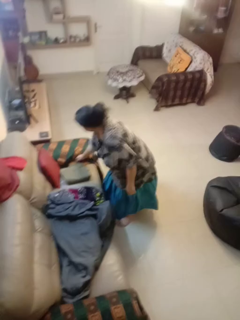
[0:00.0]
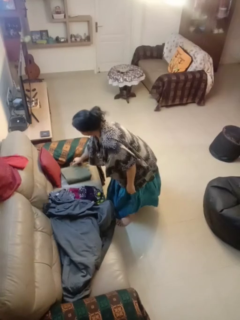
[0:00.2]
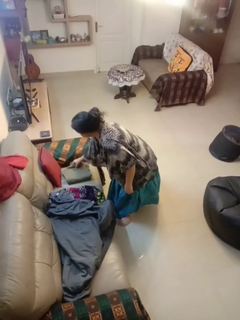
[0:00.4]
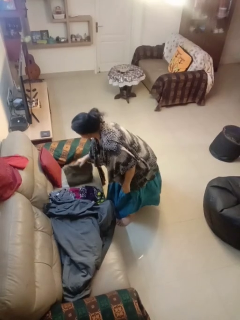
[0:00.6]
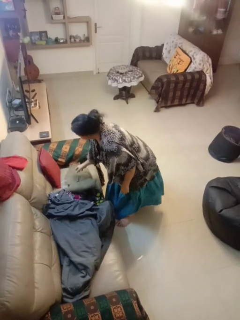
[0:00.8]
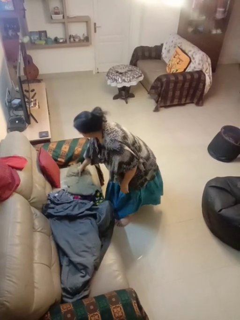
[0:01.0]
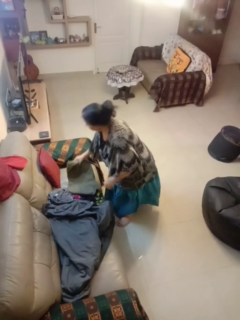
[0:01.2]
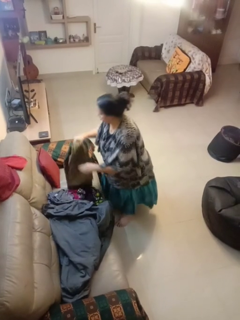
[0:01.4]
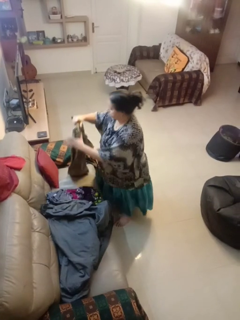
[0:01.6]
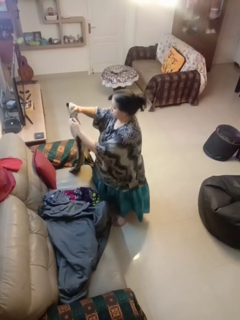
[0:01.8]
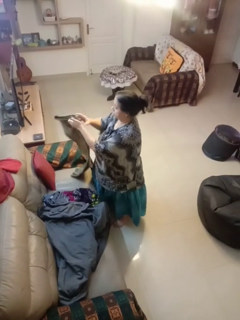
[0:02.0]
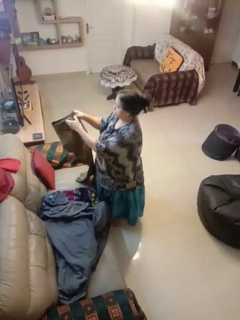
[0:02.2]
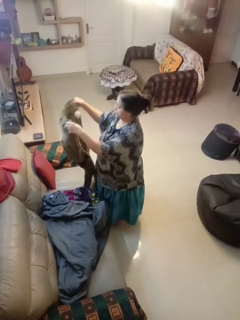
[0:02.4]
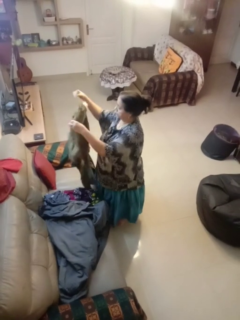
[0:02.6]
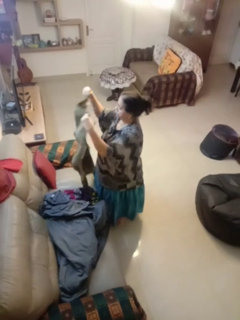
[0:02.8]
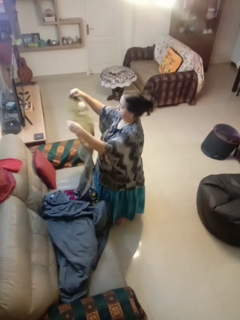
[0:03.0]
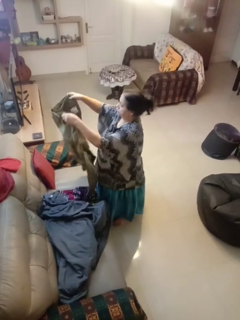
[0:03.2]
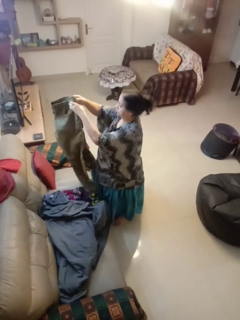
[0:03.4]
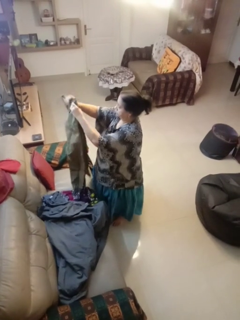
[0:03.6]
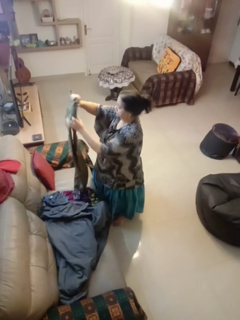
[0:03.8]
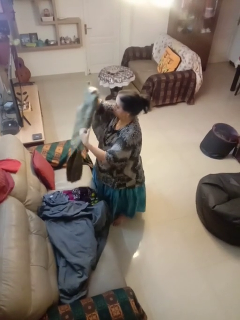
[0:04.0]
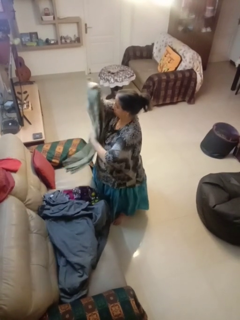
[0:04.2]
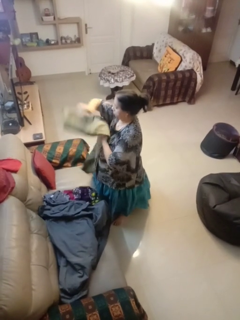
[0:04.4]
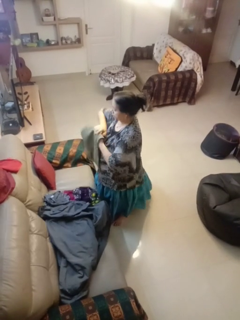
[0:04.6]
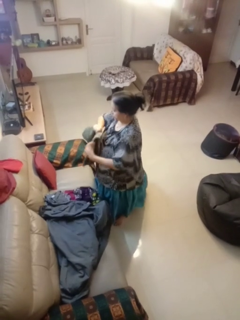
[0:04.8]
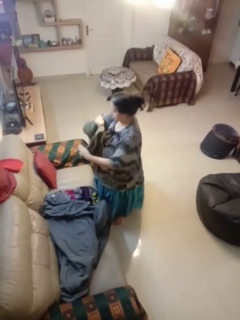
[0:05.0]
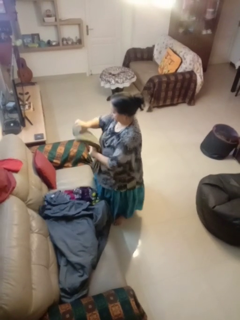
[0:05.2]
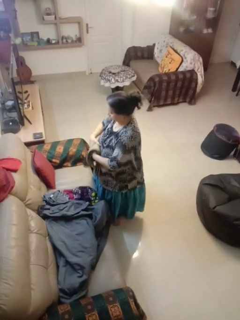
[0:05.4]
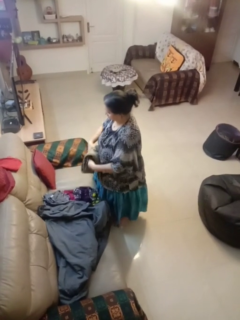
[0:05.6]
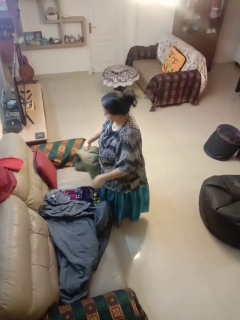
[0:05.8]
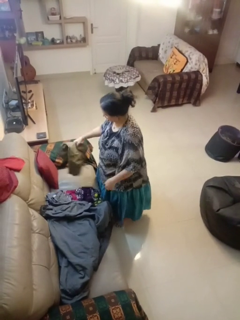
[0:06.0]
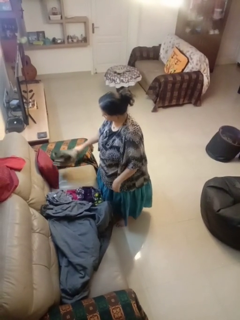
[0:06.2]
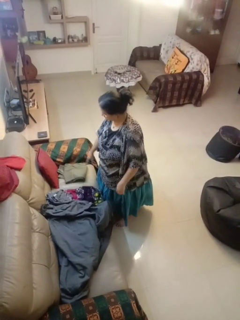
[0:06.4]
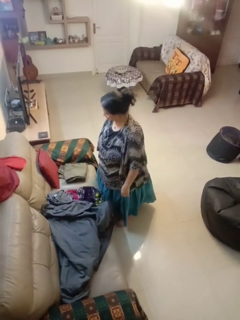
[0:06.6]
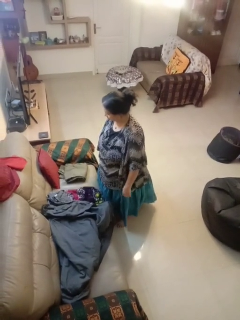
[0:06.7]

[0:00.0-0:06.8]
person folds pants

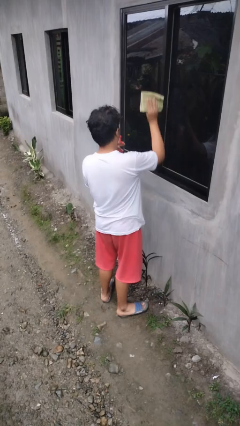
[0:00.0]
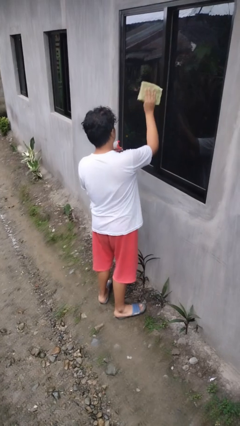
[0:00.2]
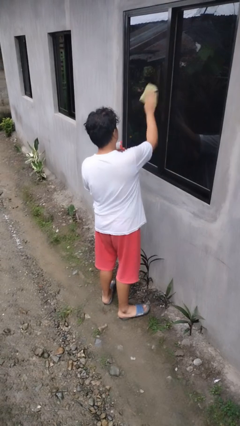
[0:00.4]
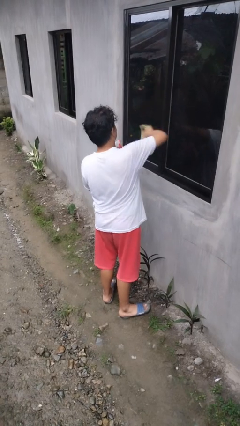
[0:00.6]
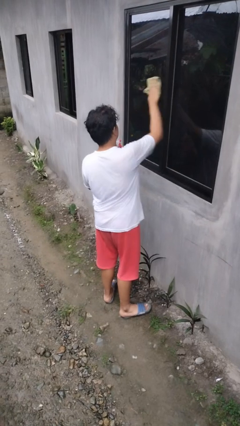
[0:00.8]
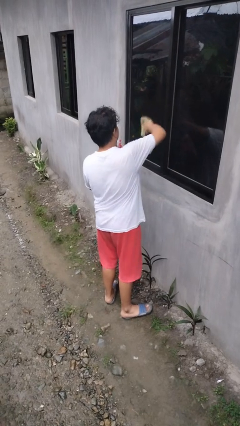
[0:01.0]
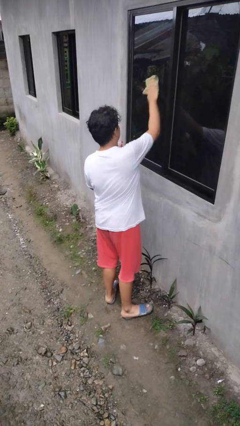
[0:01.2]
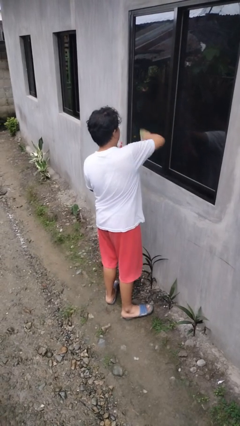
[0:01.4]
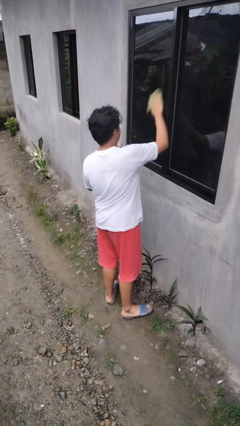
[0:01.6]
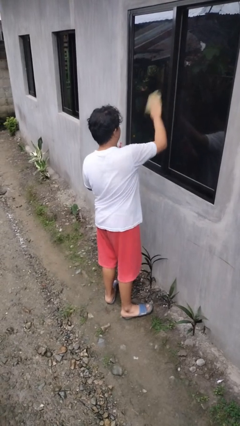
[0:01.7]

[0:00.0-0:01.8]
person washes window

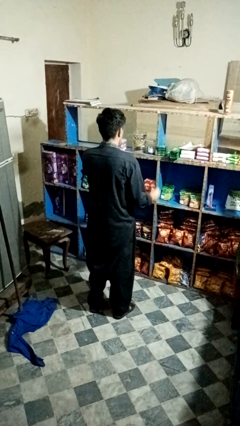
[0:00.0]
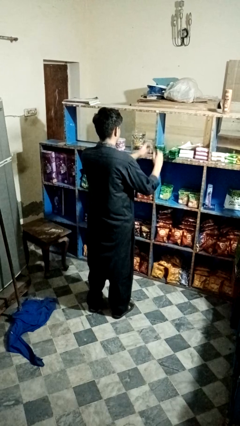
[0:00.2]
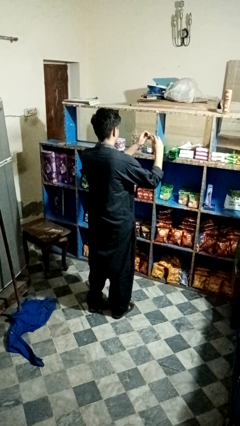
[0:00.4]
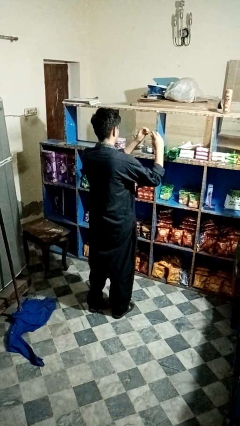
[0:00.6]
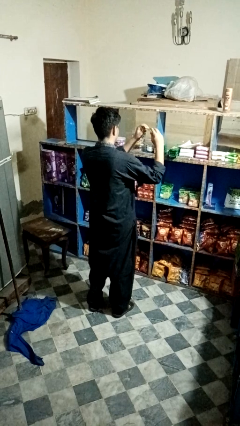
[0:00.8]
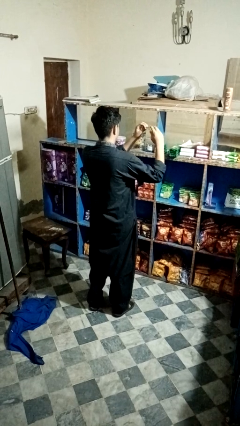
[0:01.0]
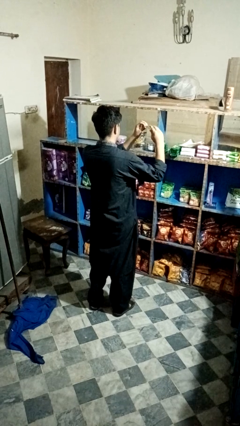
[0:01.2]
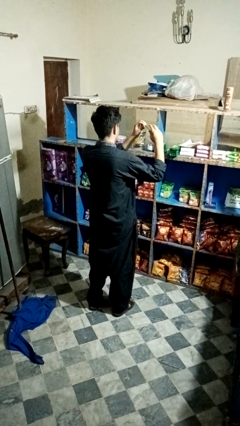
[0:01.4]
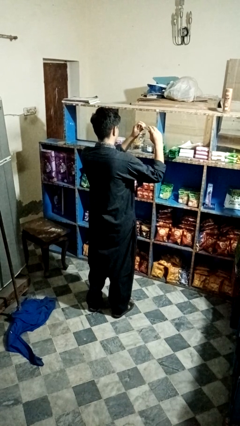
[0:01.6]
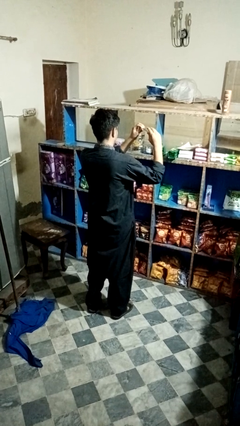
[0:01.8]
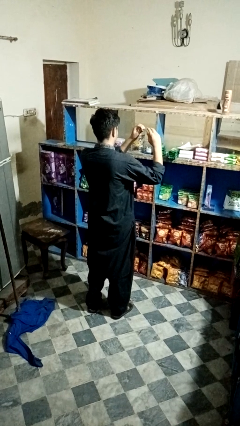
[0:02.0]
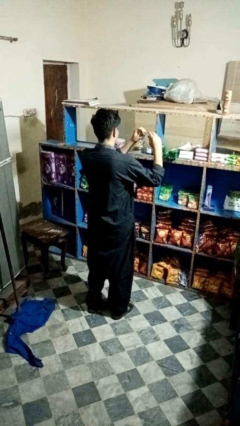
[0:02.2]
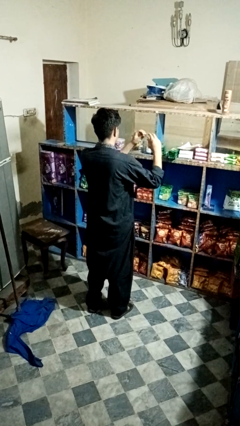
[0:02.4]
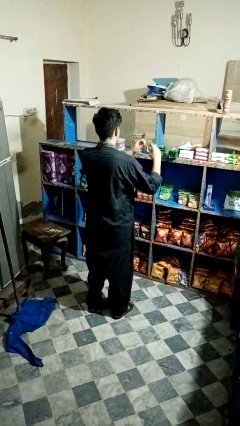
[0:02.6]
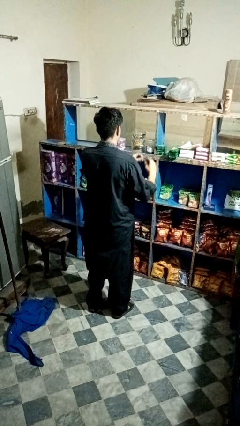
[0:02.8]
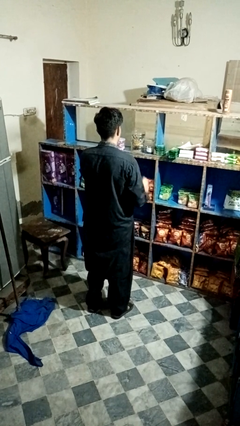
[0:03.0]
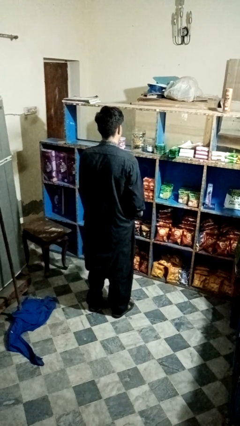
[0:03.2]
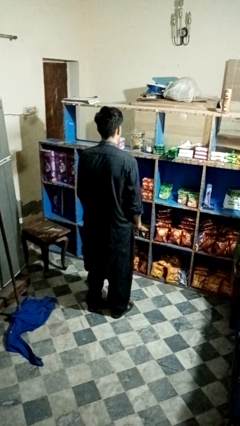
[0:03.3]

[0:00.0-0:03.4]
person clips fingernails

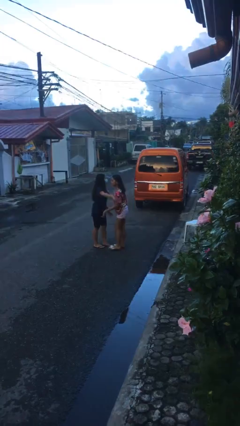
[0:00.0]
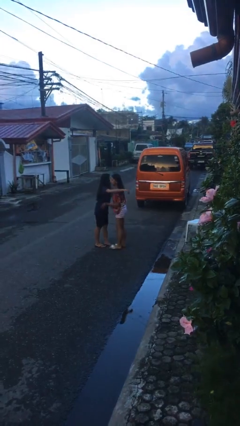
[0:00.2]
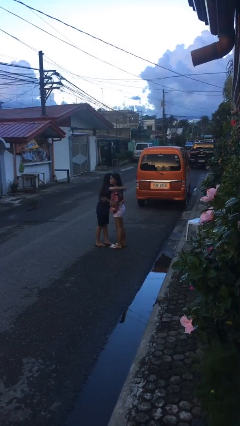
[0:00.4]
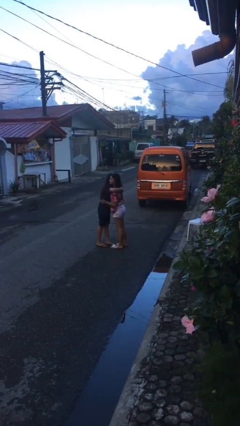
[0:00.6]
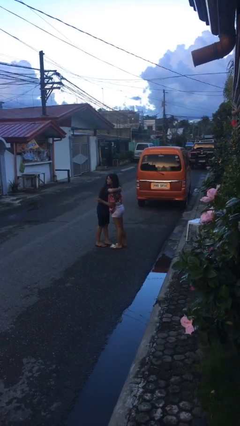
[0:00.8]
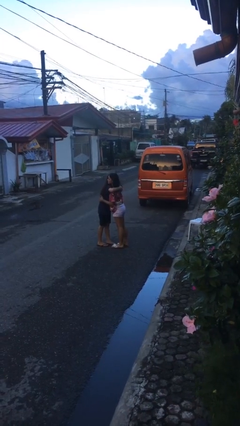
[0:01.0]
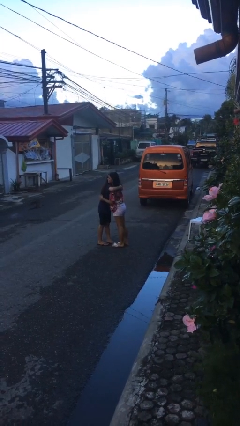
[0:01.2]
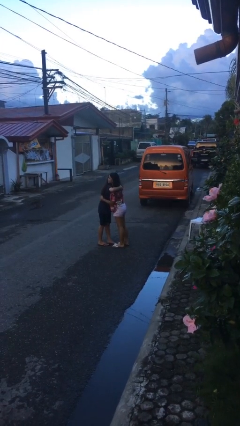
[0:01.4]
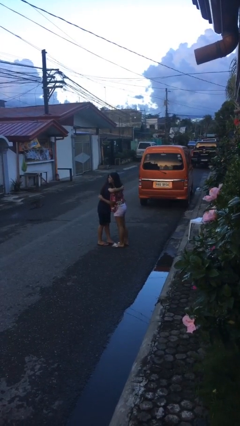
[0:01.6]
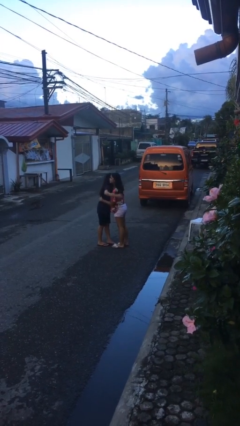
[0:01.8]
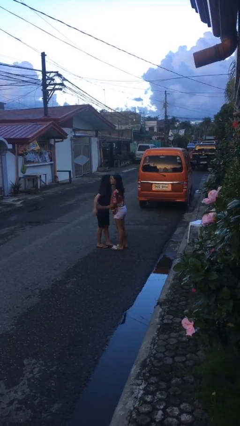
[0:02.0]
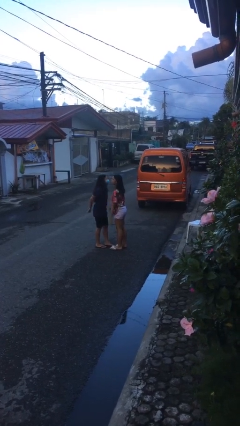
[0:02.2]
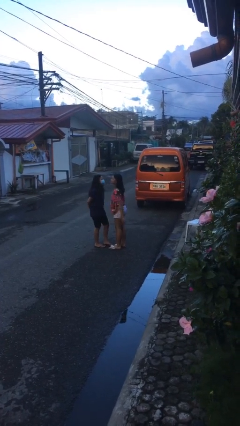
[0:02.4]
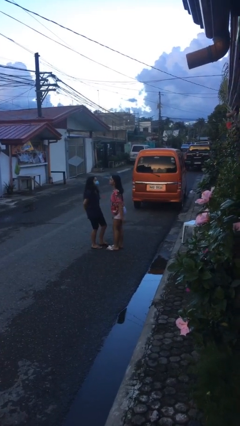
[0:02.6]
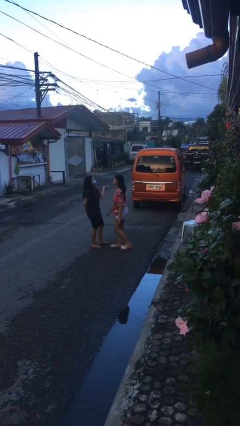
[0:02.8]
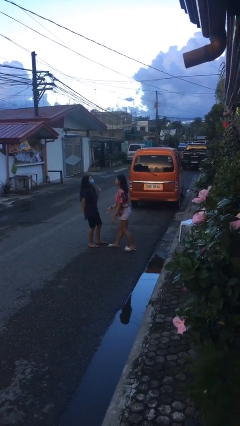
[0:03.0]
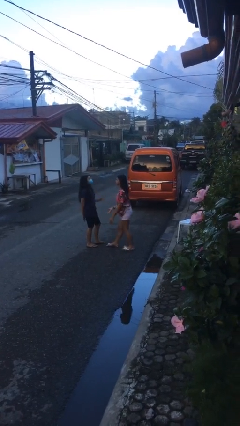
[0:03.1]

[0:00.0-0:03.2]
person embraces person

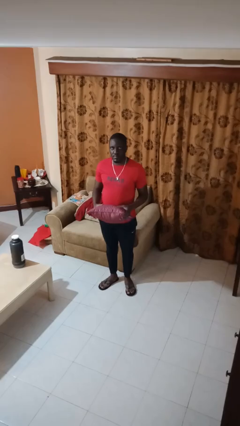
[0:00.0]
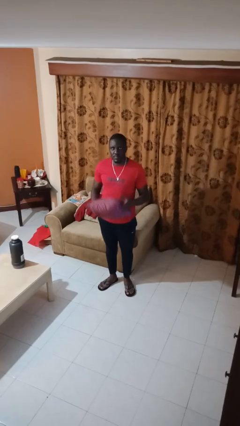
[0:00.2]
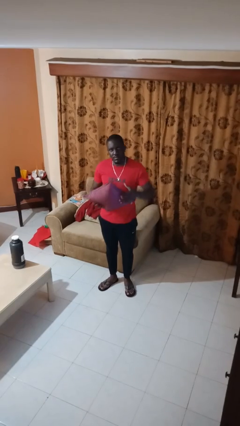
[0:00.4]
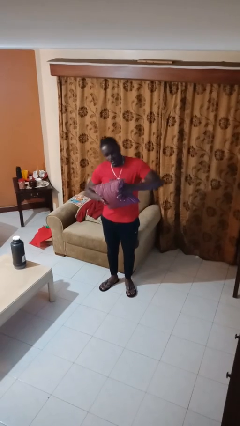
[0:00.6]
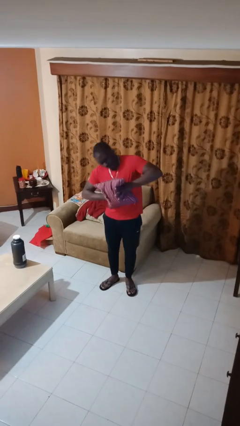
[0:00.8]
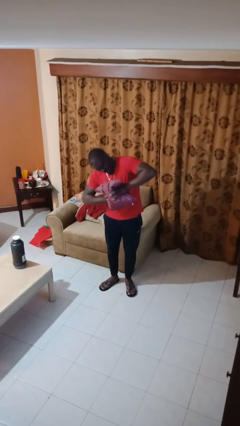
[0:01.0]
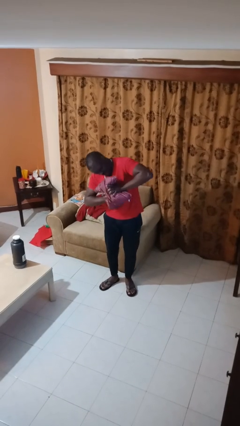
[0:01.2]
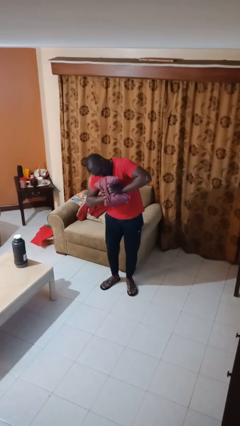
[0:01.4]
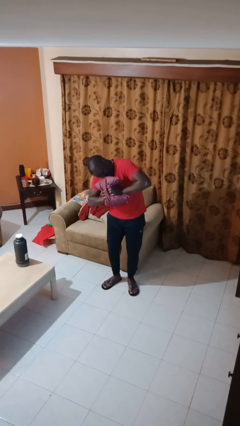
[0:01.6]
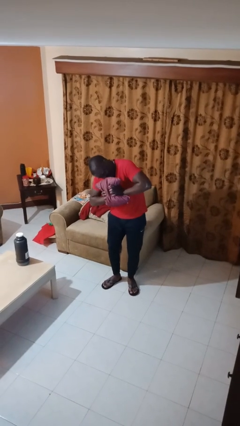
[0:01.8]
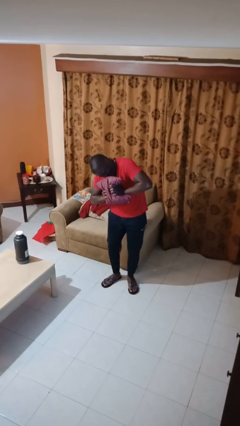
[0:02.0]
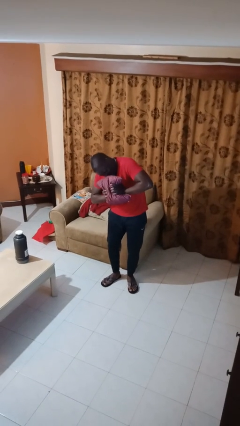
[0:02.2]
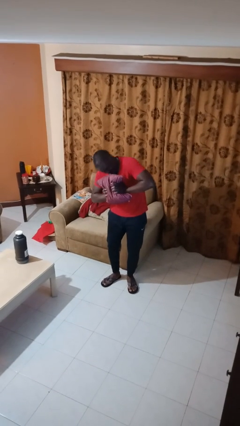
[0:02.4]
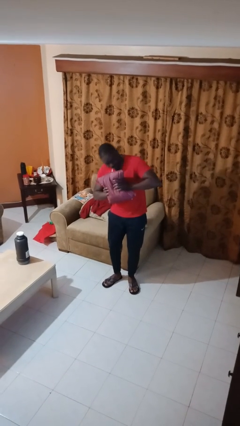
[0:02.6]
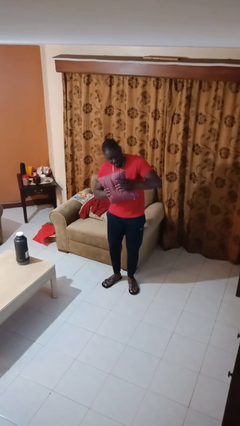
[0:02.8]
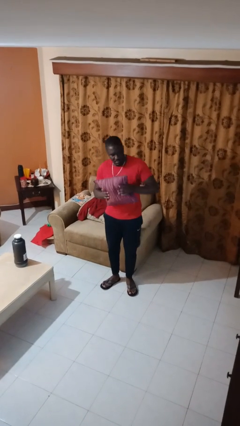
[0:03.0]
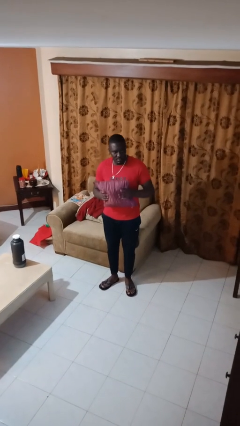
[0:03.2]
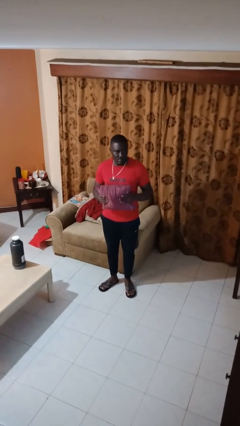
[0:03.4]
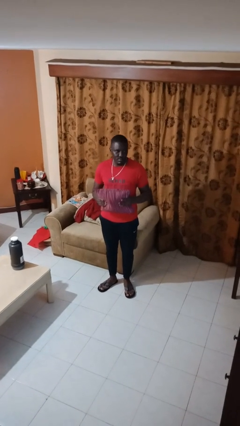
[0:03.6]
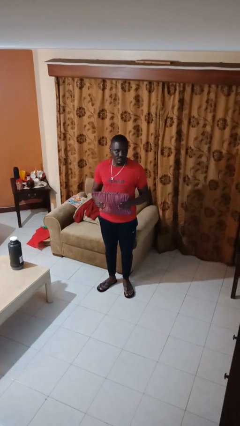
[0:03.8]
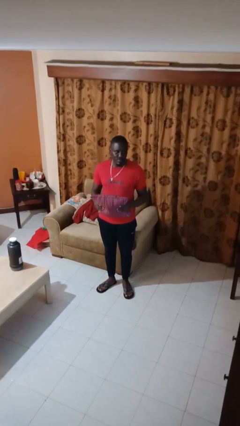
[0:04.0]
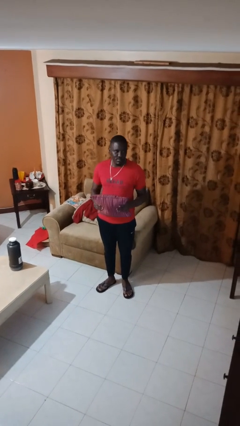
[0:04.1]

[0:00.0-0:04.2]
person squeezes object
